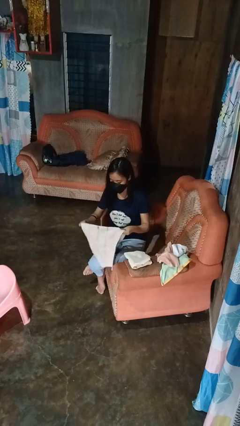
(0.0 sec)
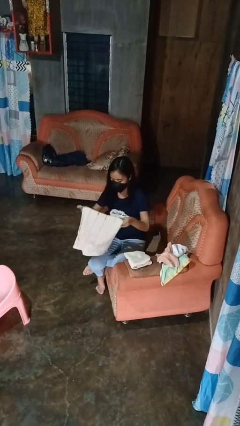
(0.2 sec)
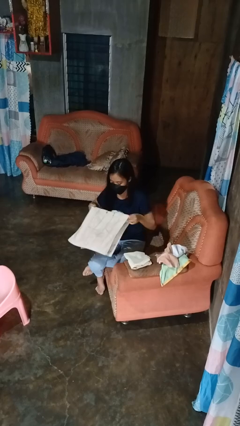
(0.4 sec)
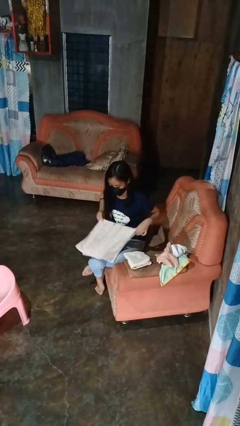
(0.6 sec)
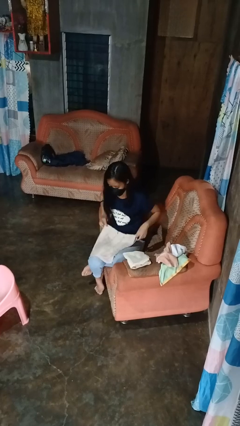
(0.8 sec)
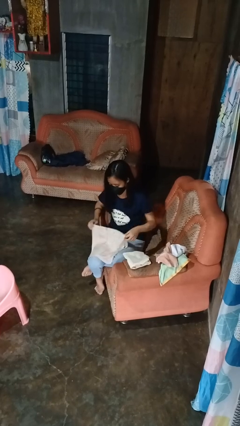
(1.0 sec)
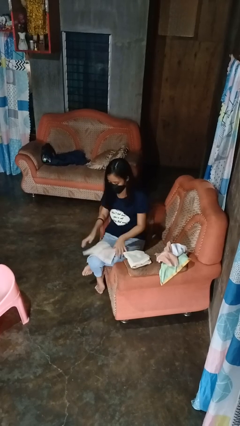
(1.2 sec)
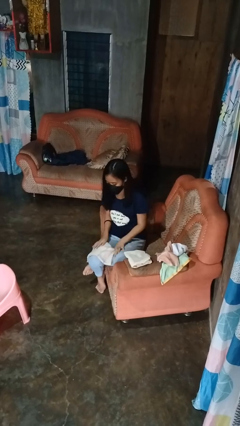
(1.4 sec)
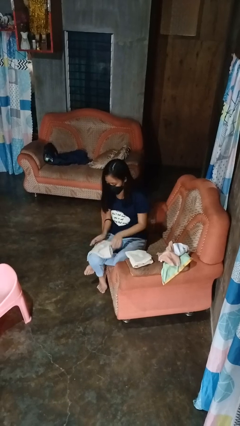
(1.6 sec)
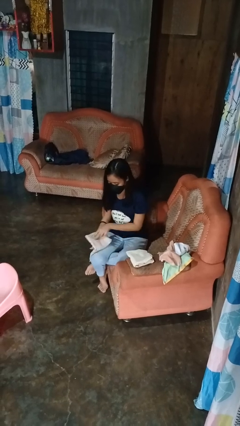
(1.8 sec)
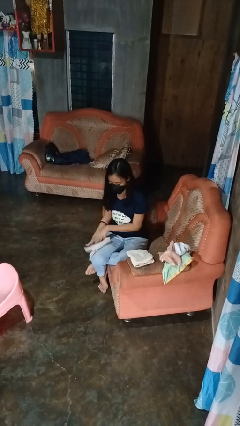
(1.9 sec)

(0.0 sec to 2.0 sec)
person folds towel

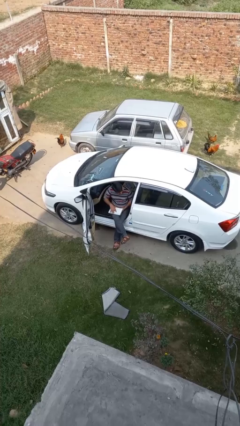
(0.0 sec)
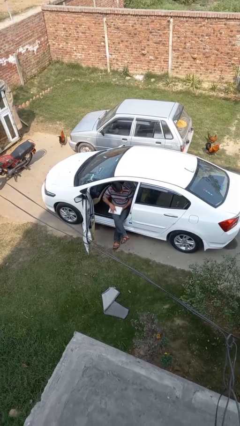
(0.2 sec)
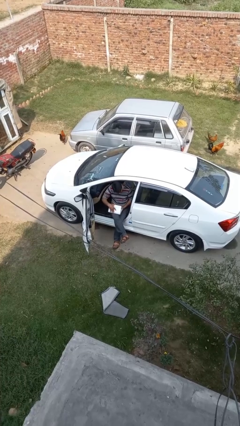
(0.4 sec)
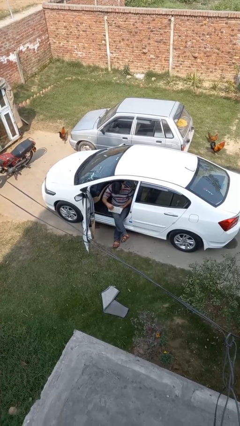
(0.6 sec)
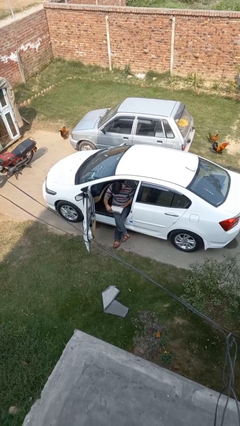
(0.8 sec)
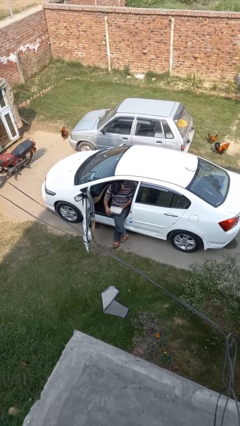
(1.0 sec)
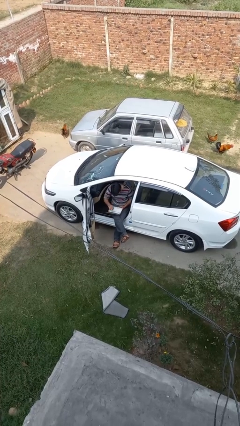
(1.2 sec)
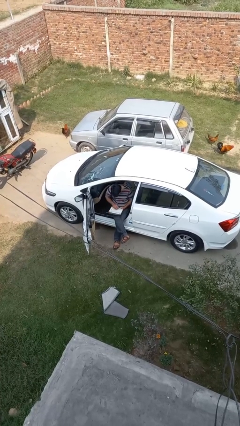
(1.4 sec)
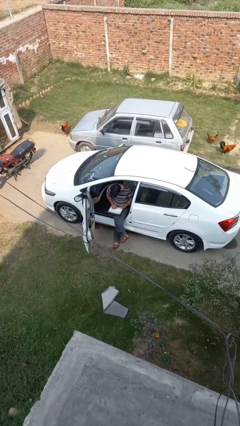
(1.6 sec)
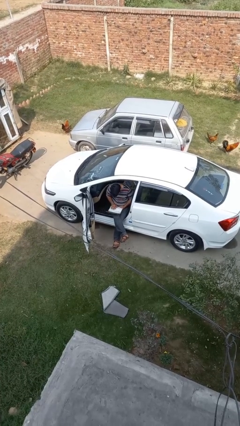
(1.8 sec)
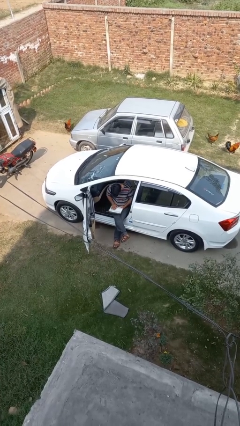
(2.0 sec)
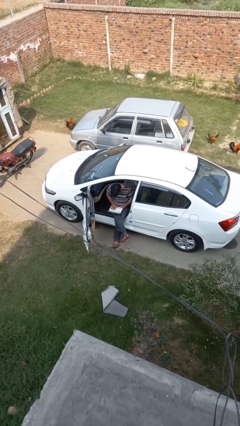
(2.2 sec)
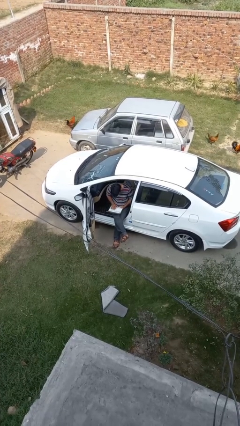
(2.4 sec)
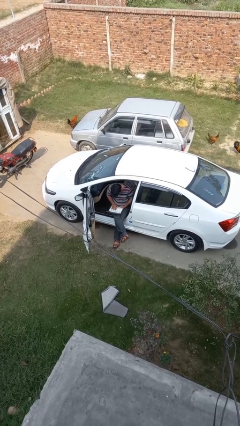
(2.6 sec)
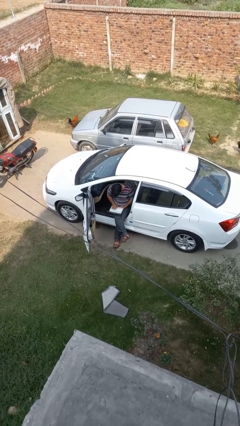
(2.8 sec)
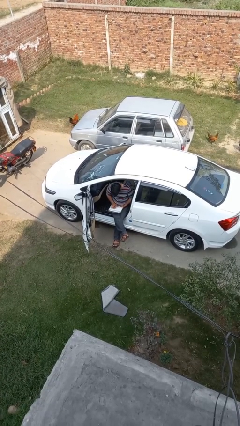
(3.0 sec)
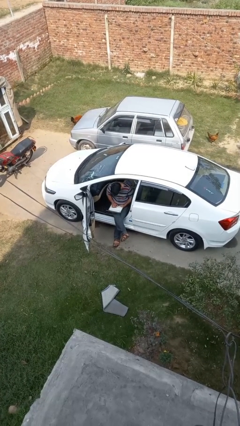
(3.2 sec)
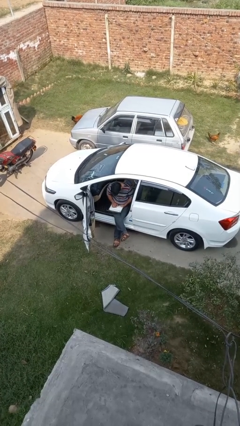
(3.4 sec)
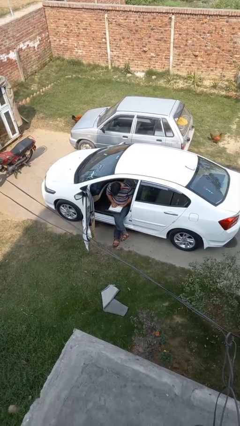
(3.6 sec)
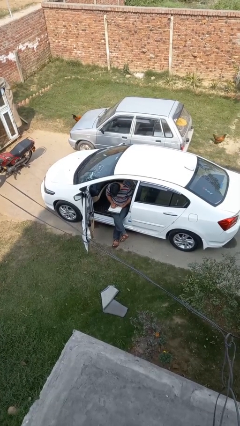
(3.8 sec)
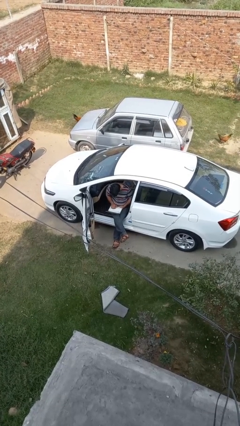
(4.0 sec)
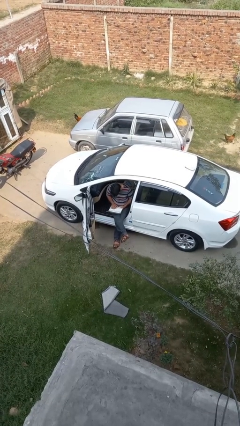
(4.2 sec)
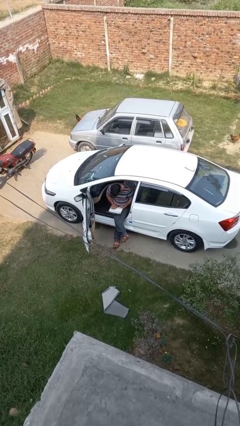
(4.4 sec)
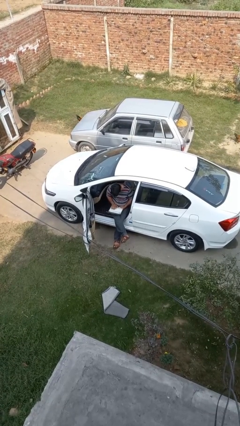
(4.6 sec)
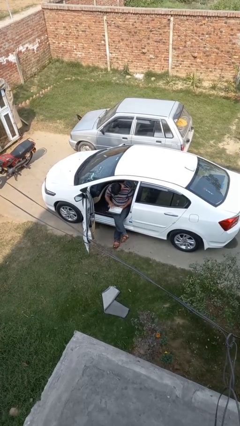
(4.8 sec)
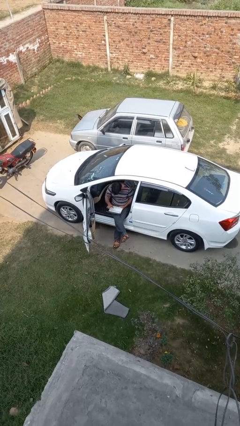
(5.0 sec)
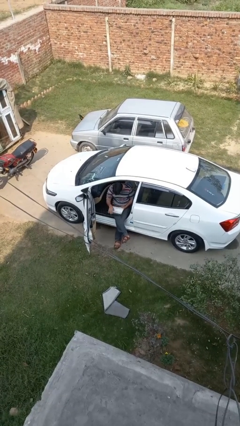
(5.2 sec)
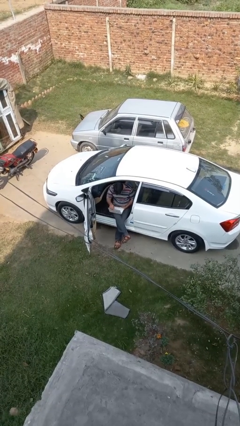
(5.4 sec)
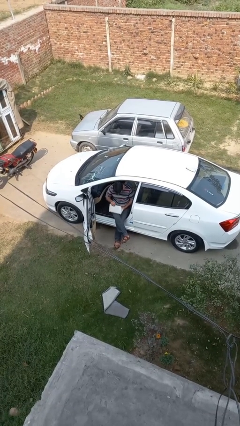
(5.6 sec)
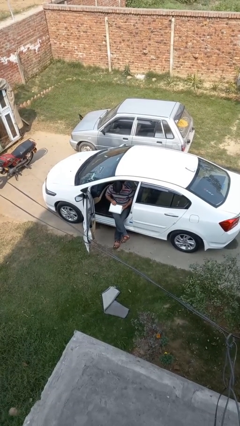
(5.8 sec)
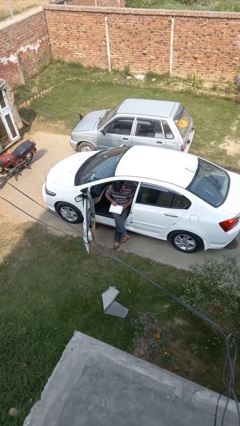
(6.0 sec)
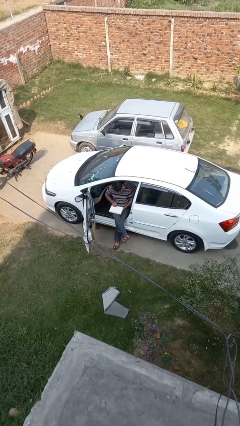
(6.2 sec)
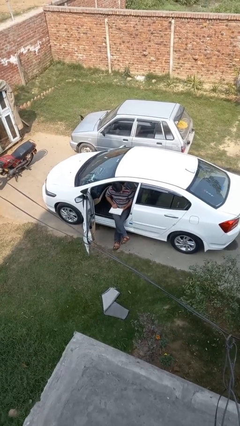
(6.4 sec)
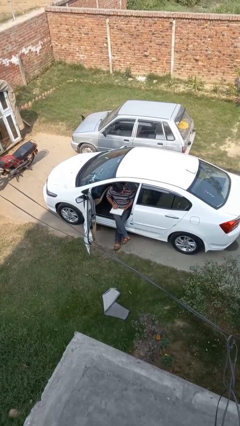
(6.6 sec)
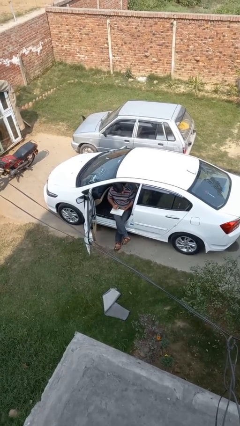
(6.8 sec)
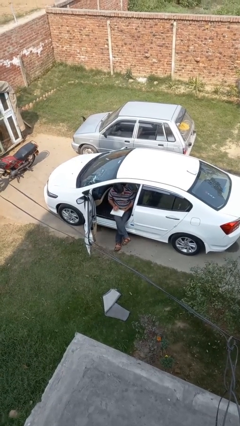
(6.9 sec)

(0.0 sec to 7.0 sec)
person interacts with laptop

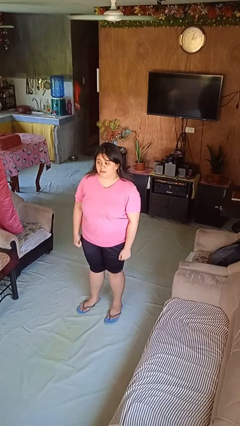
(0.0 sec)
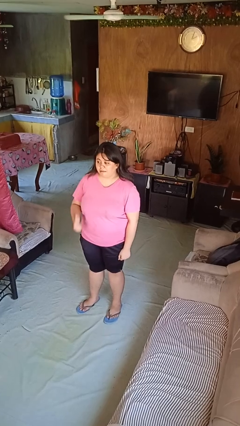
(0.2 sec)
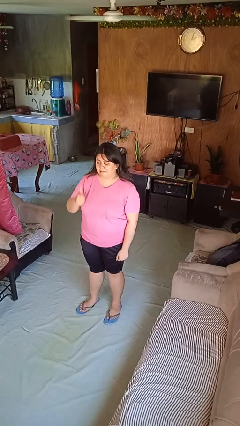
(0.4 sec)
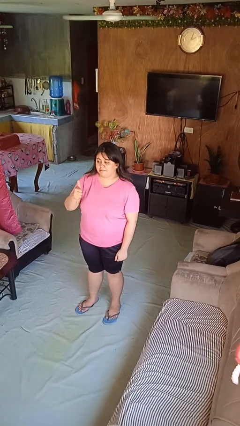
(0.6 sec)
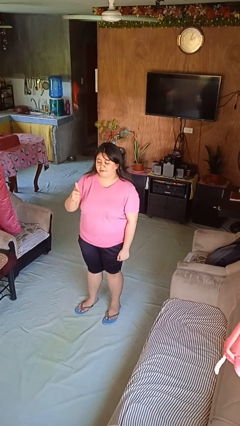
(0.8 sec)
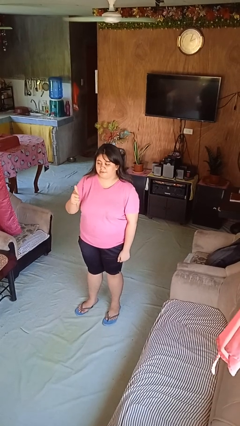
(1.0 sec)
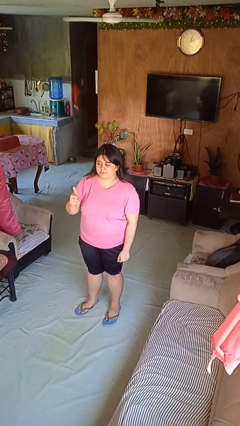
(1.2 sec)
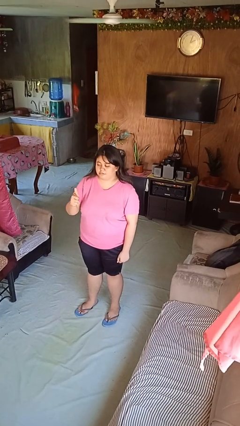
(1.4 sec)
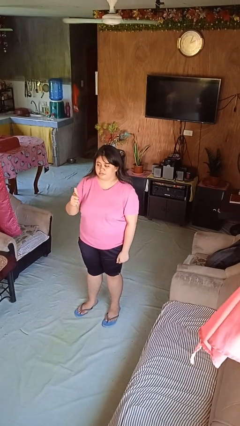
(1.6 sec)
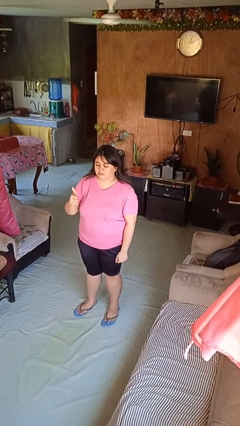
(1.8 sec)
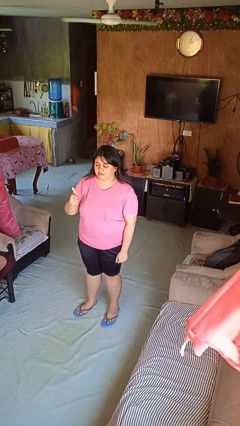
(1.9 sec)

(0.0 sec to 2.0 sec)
person gestures thumbs up

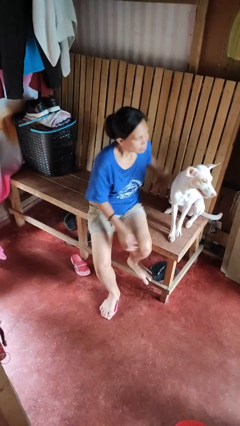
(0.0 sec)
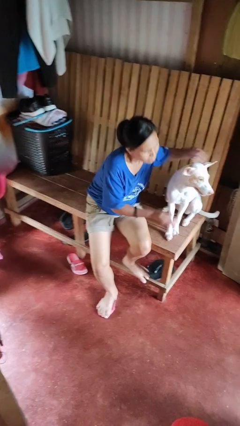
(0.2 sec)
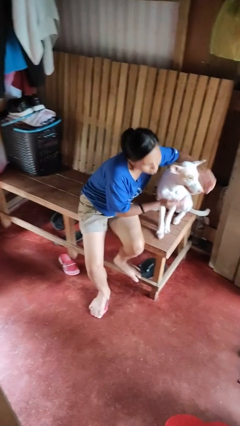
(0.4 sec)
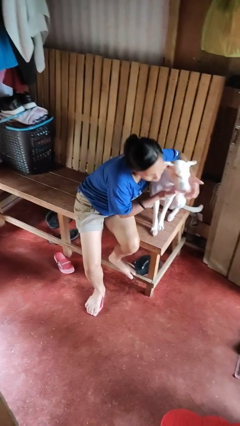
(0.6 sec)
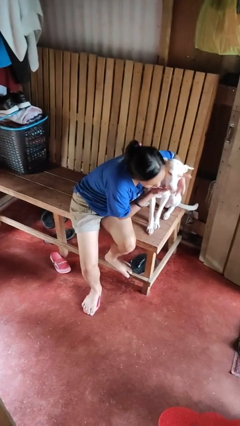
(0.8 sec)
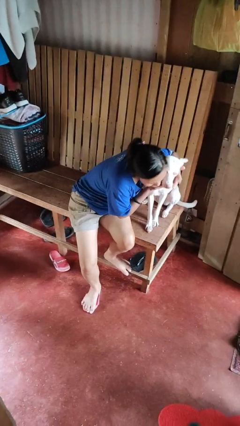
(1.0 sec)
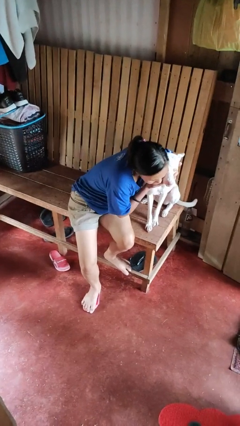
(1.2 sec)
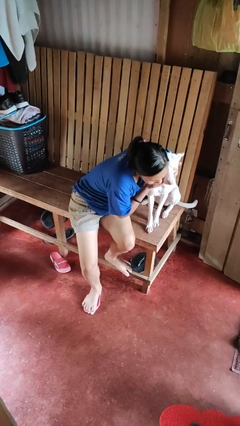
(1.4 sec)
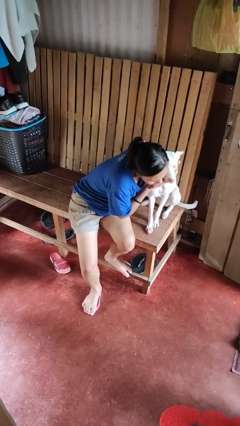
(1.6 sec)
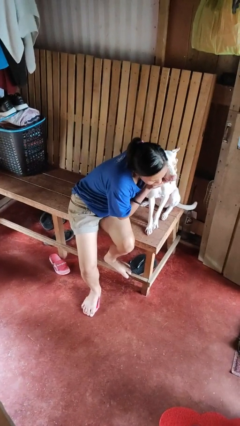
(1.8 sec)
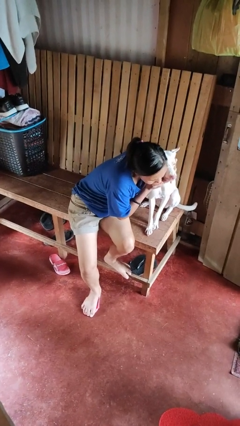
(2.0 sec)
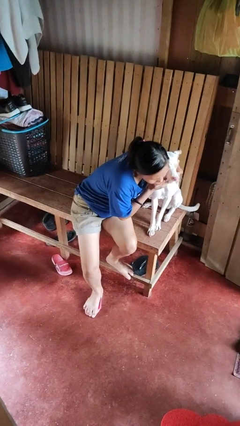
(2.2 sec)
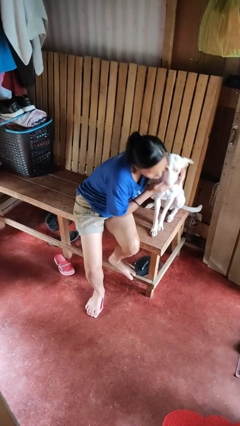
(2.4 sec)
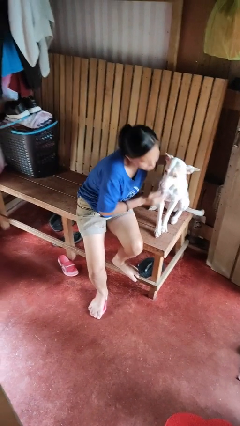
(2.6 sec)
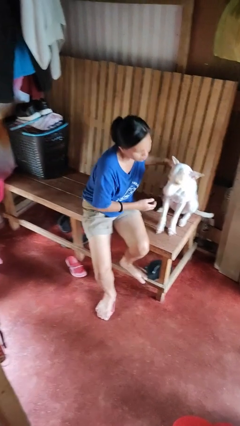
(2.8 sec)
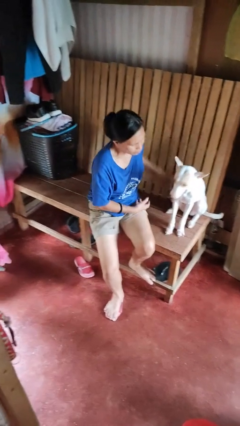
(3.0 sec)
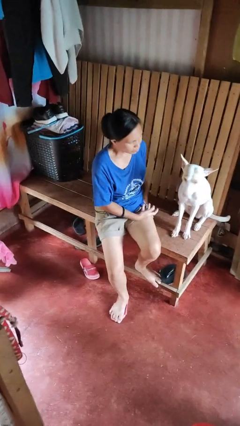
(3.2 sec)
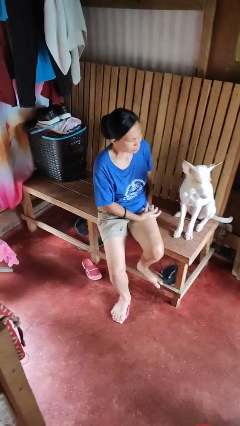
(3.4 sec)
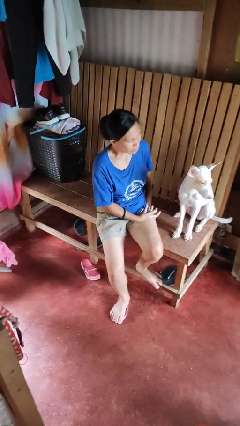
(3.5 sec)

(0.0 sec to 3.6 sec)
person hugs dog

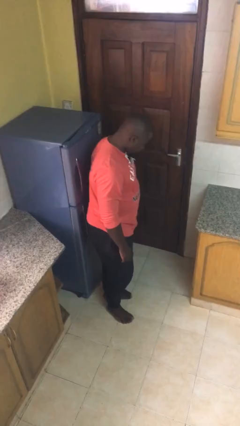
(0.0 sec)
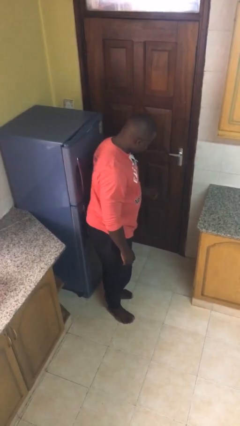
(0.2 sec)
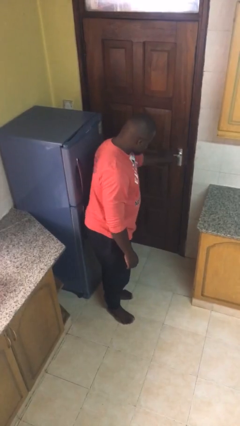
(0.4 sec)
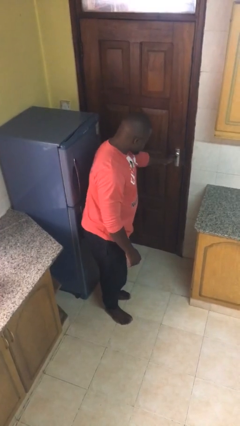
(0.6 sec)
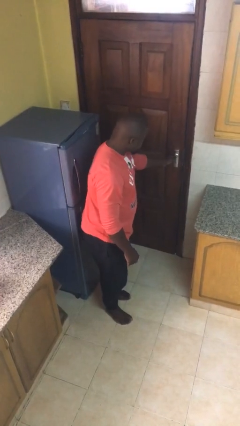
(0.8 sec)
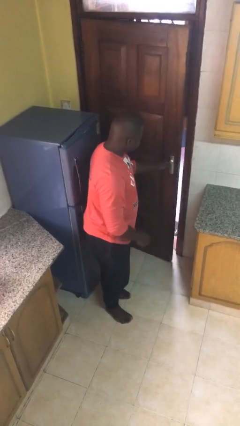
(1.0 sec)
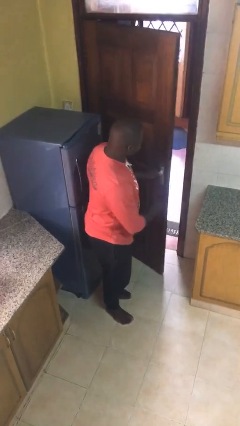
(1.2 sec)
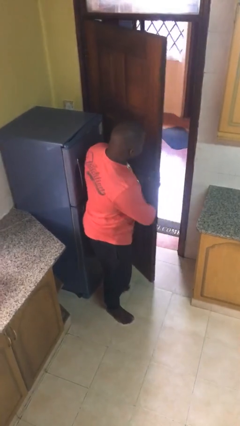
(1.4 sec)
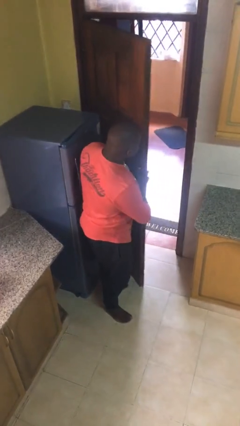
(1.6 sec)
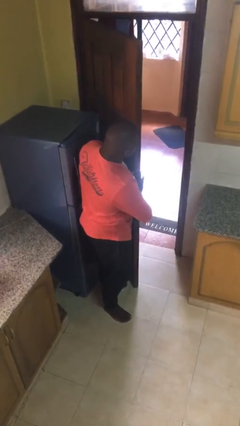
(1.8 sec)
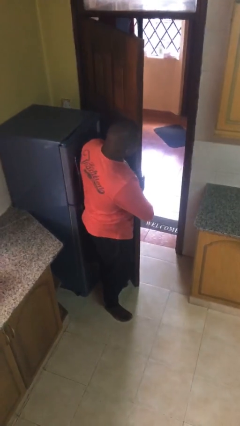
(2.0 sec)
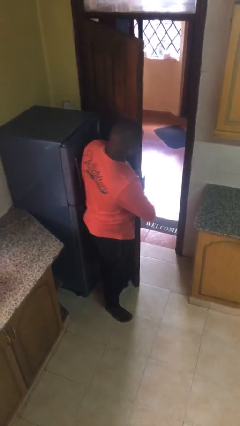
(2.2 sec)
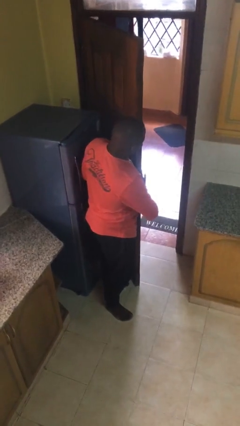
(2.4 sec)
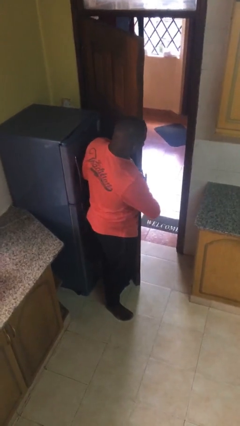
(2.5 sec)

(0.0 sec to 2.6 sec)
person opens facility door
